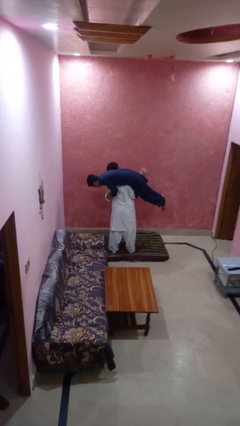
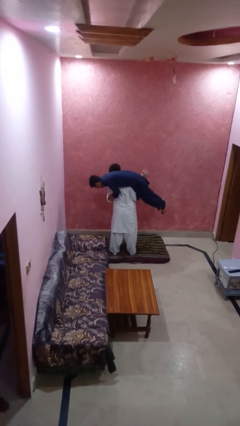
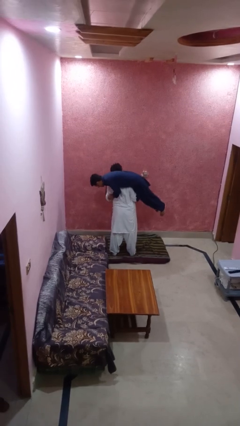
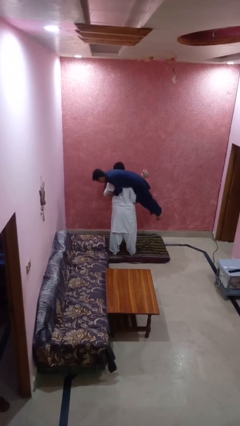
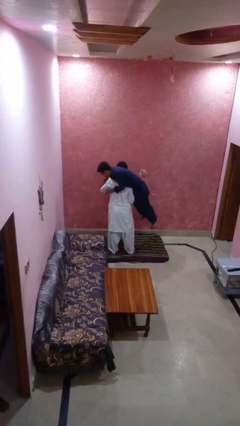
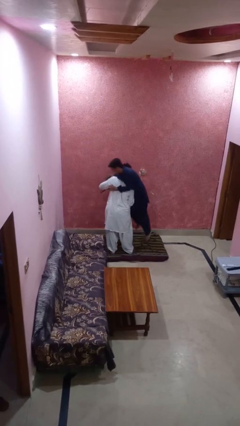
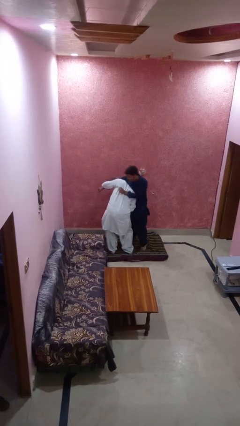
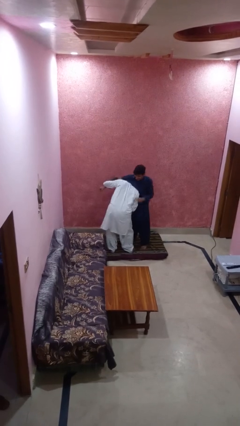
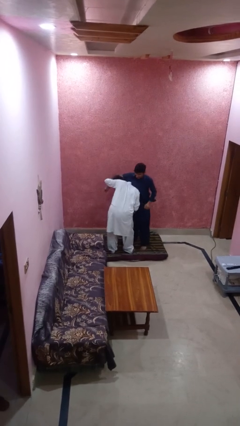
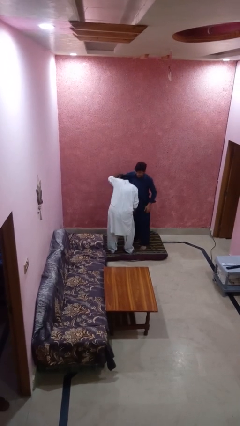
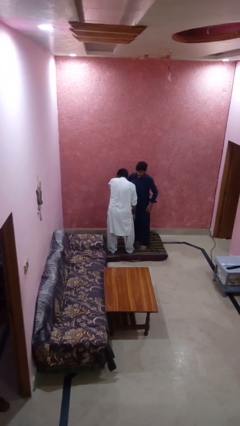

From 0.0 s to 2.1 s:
person puts down person

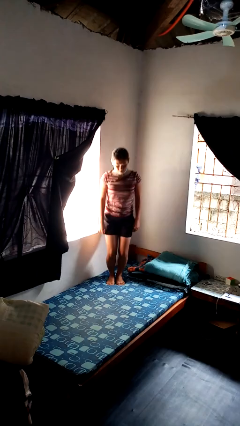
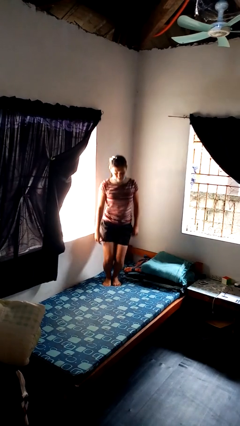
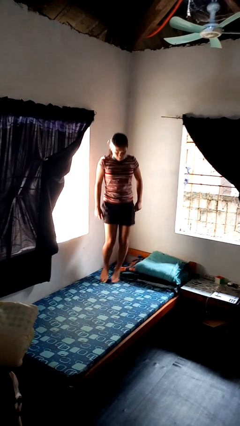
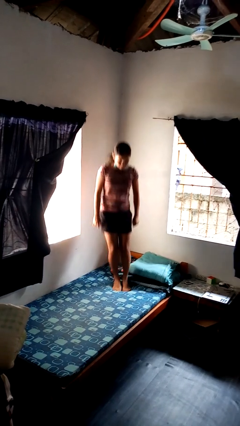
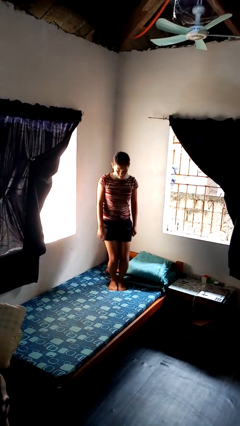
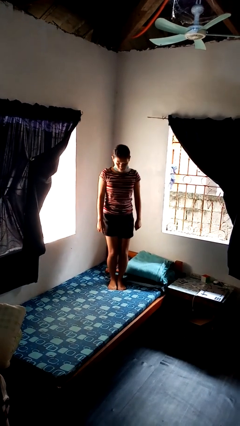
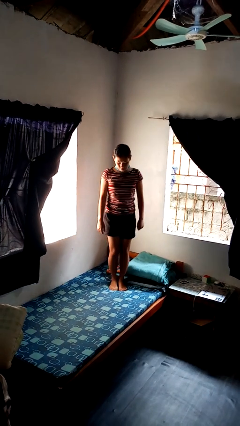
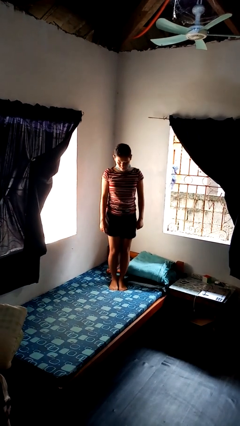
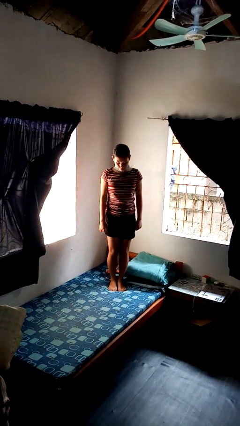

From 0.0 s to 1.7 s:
person jumps on bed

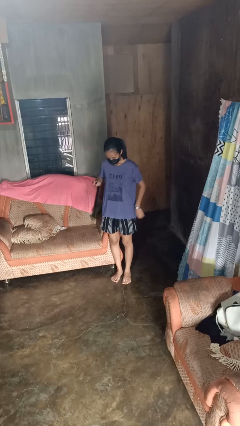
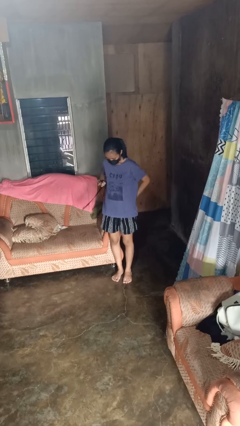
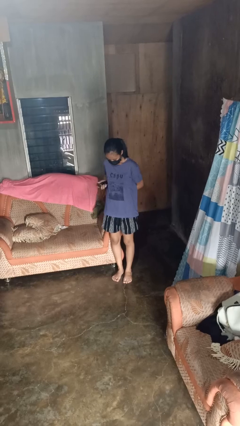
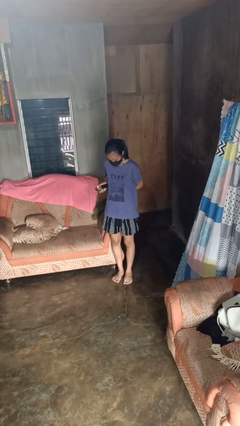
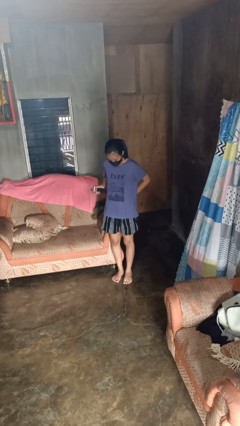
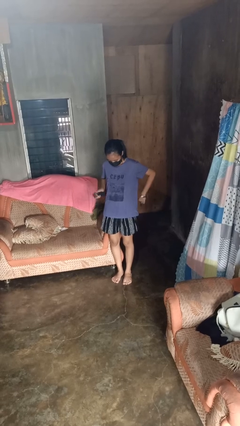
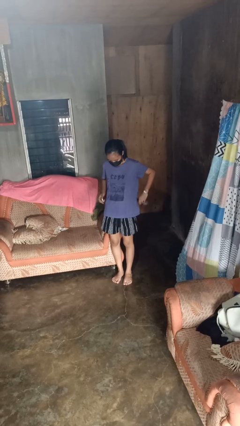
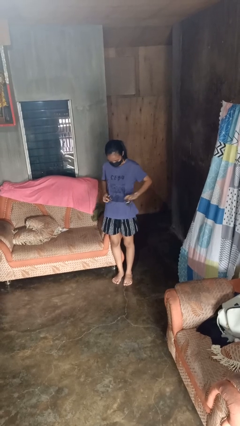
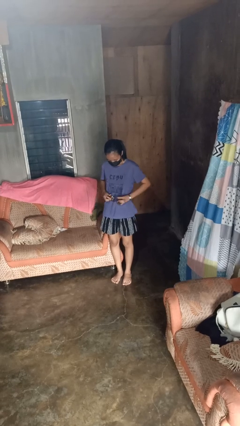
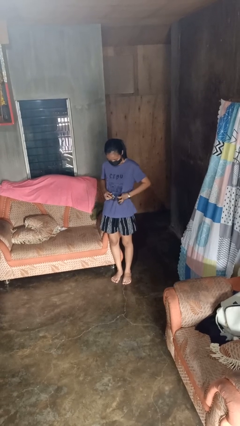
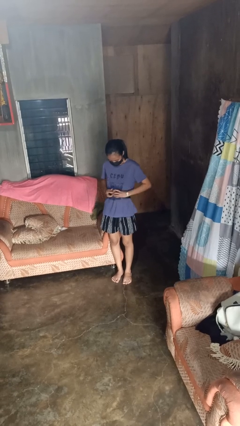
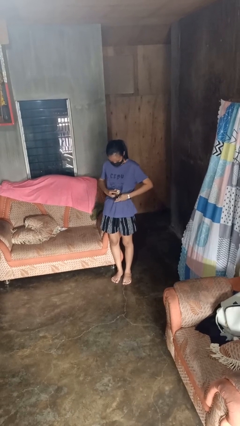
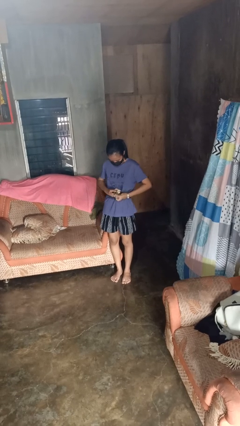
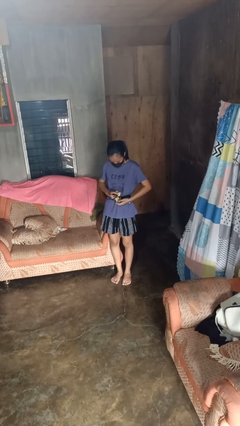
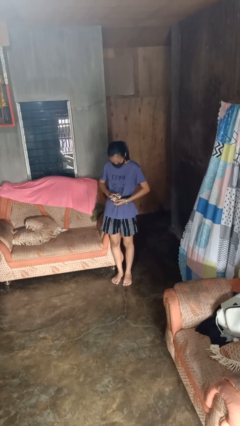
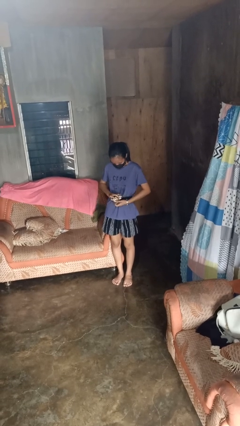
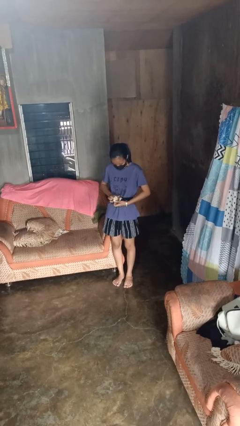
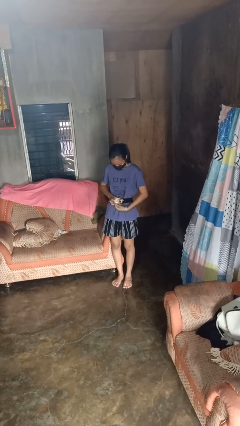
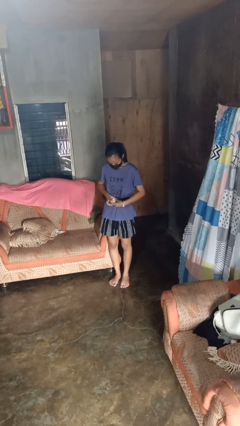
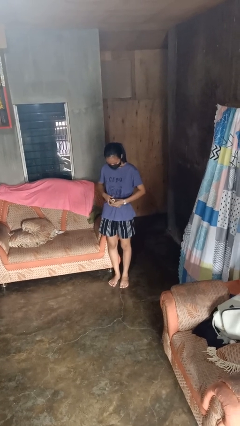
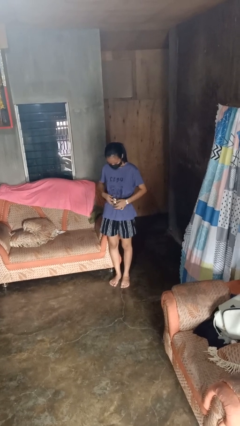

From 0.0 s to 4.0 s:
person puts on belt

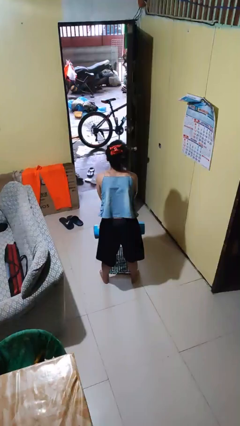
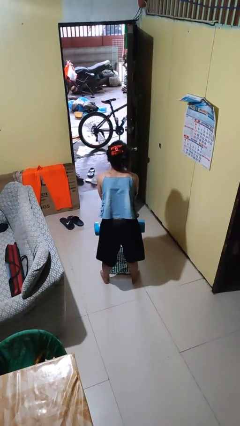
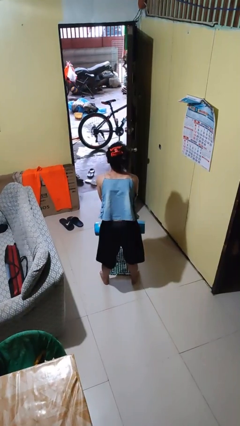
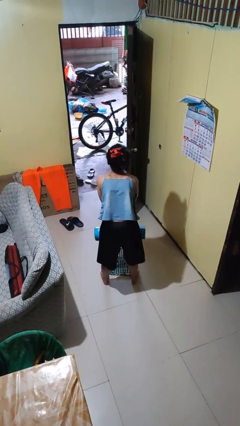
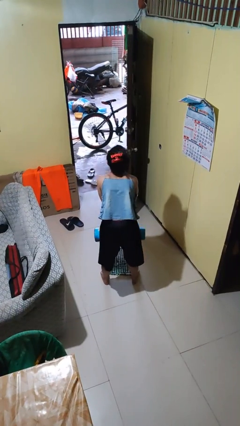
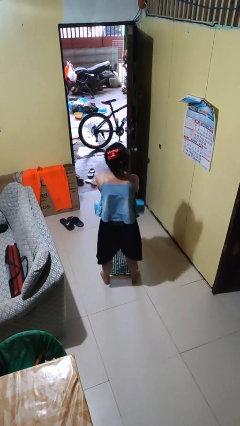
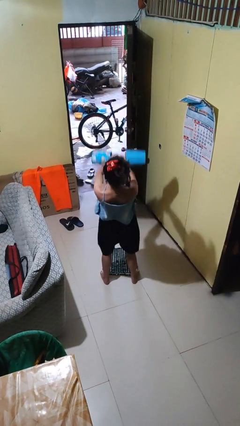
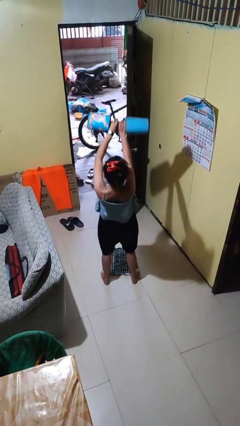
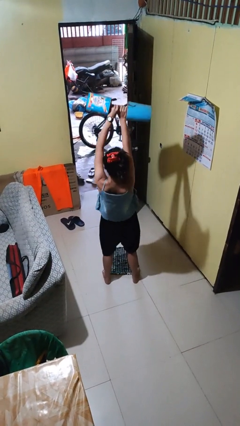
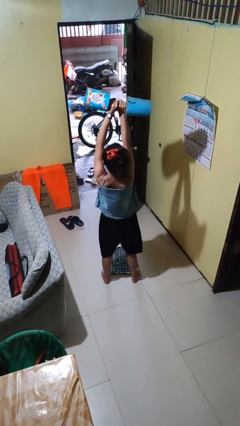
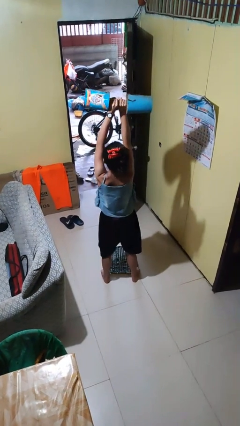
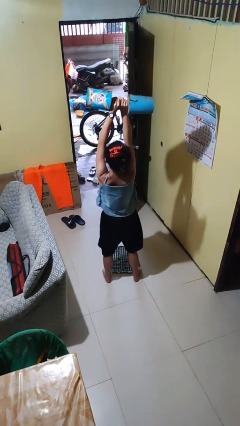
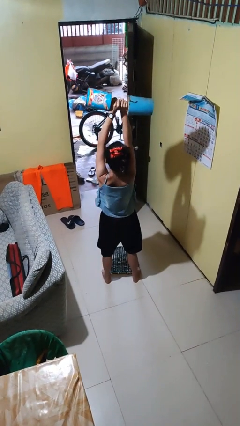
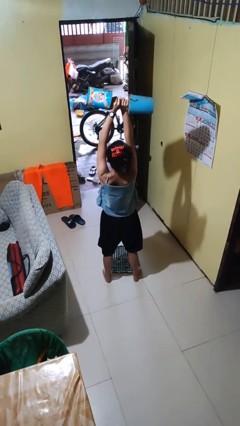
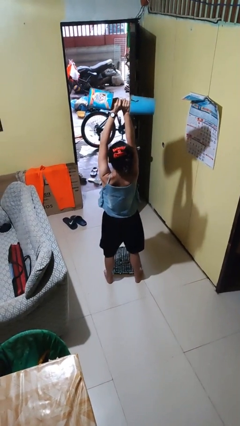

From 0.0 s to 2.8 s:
person lifts dumbbells

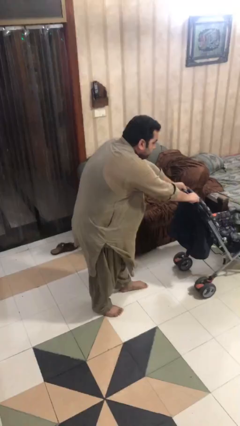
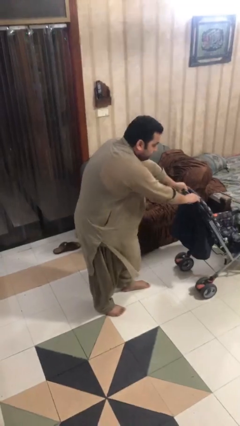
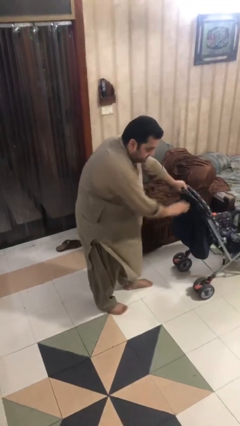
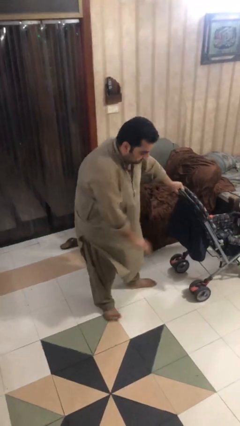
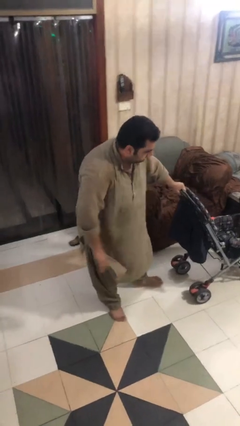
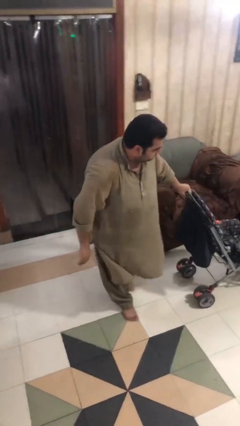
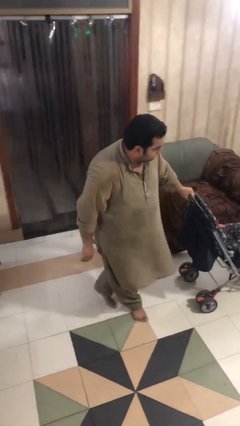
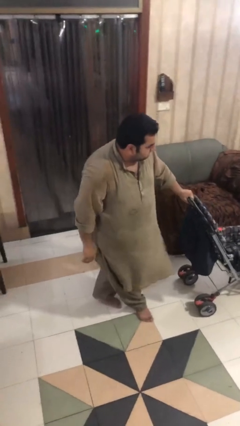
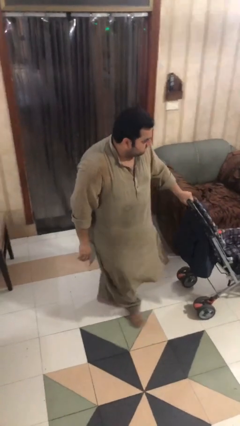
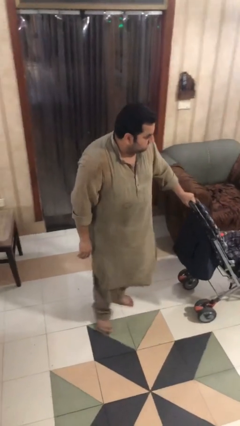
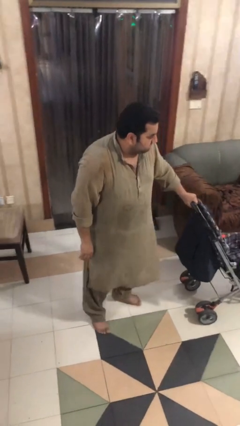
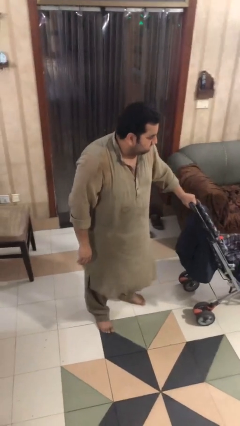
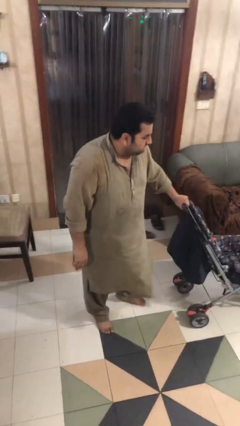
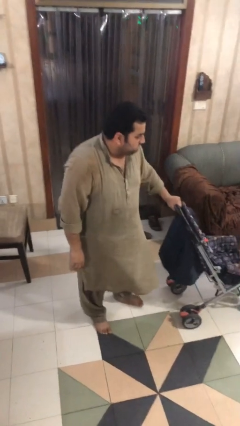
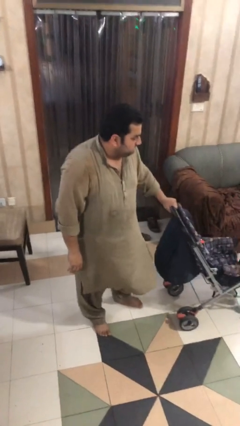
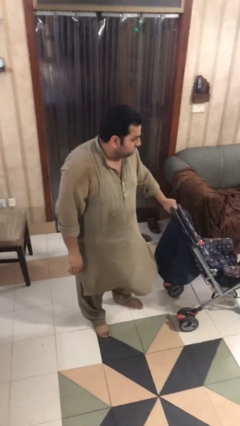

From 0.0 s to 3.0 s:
person pulls wheeled cart

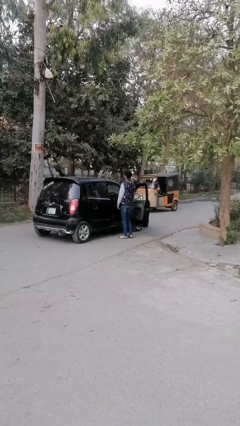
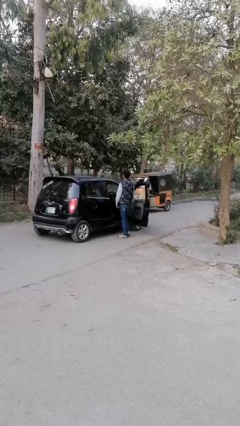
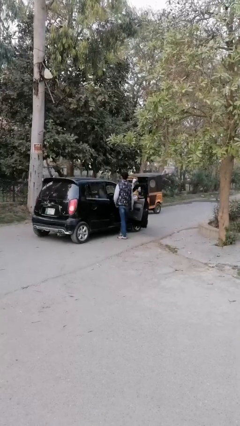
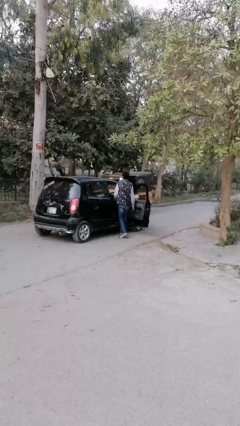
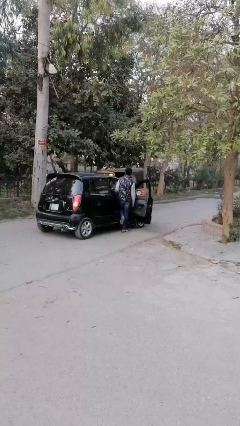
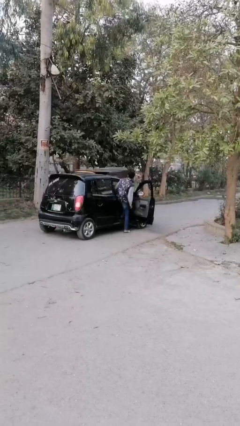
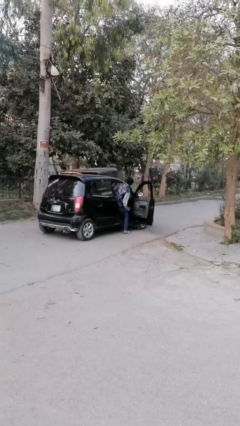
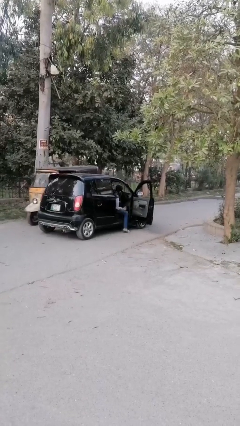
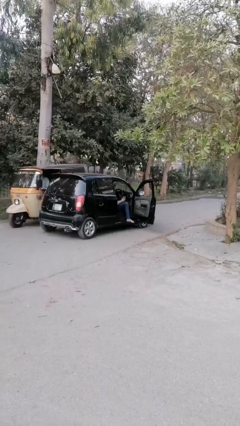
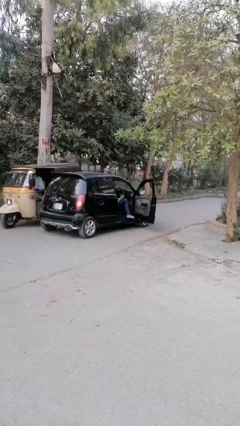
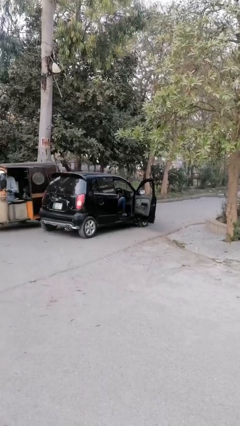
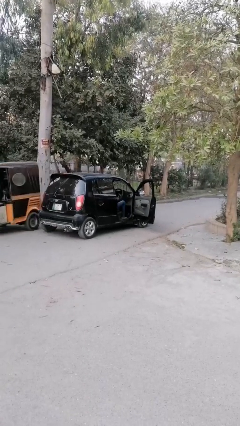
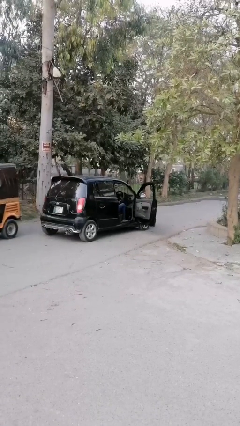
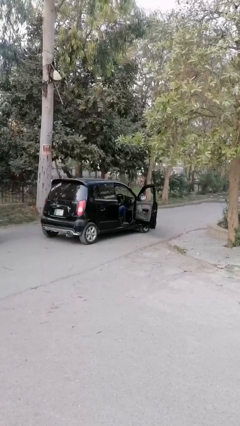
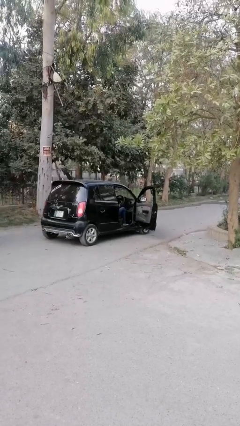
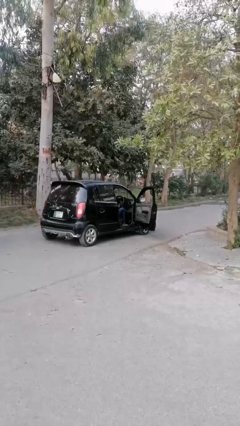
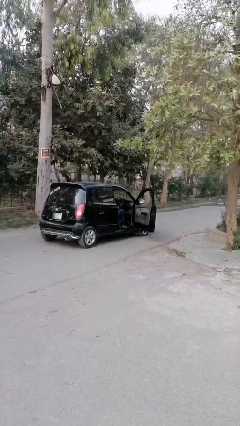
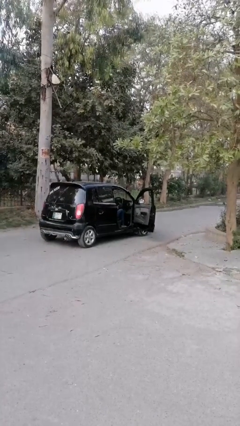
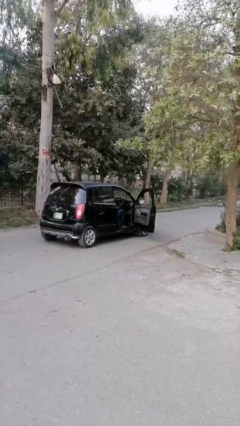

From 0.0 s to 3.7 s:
person enters car
